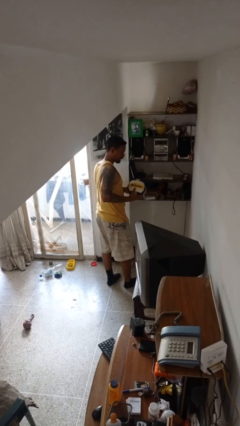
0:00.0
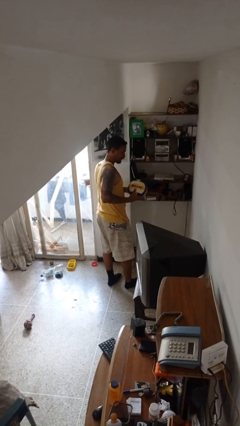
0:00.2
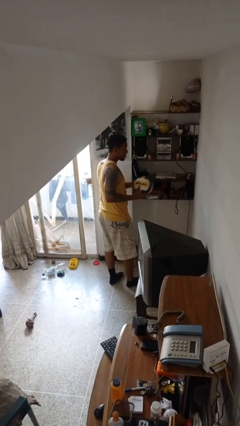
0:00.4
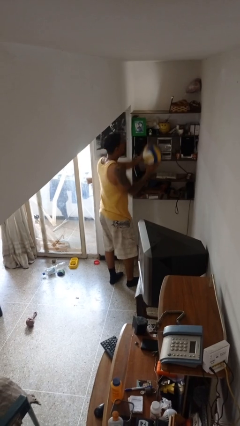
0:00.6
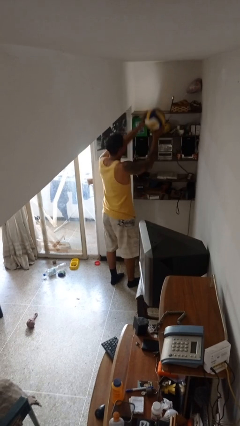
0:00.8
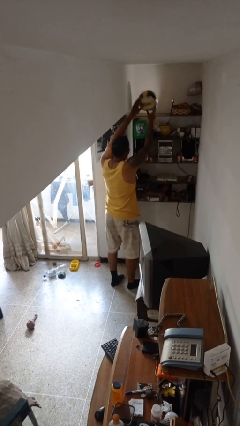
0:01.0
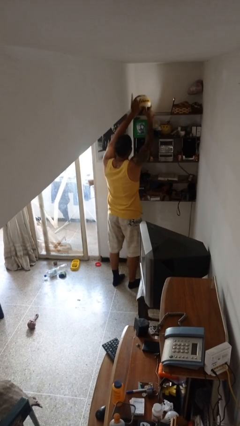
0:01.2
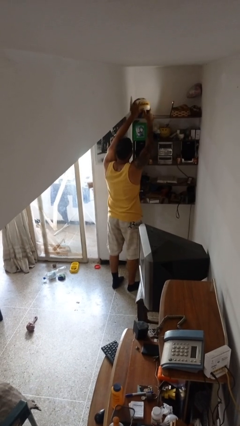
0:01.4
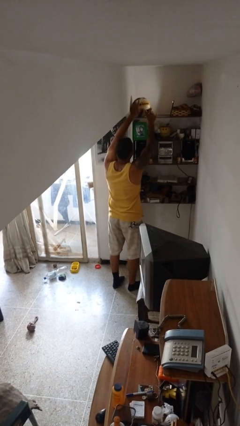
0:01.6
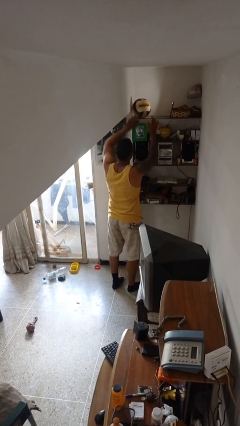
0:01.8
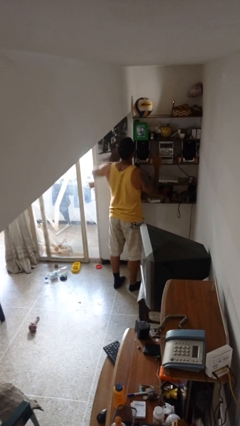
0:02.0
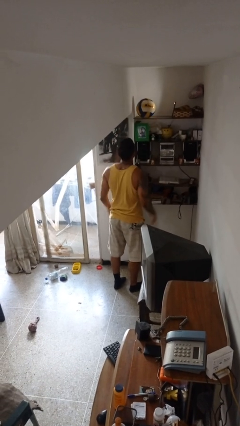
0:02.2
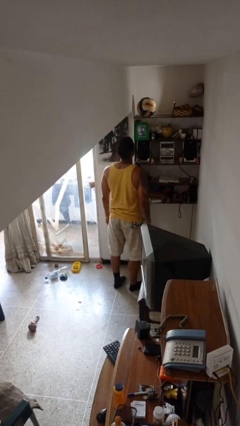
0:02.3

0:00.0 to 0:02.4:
person puts down object on shelf

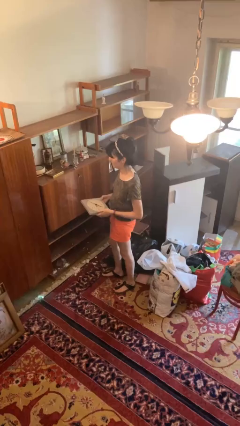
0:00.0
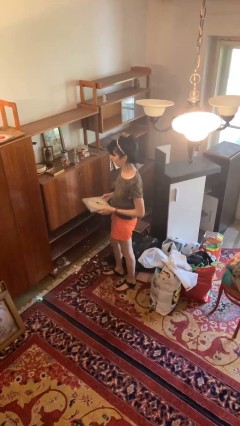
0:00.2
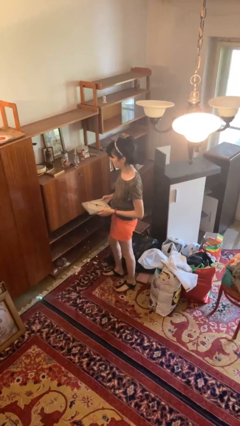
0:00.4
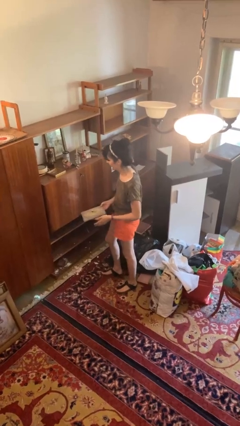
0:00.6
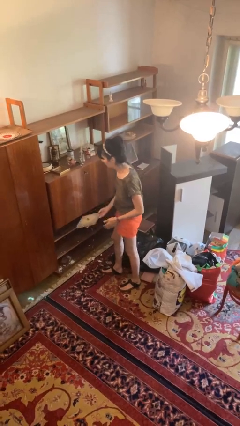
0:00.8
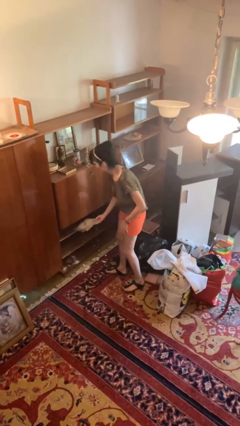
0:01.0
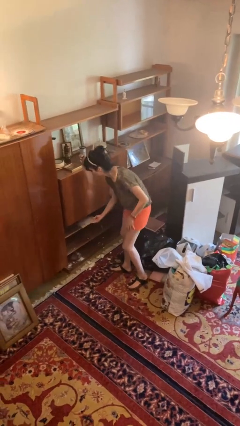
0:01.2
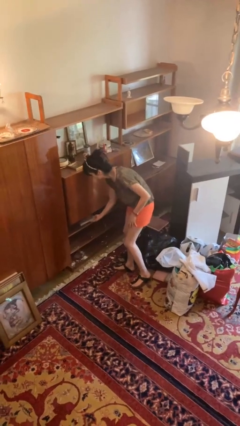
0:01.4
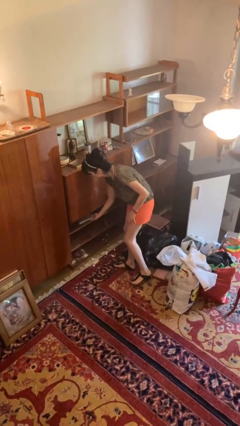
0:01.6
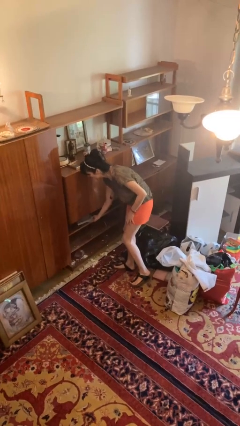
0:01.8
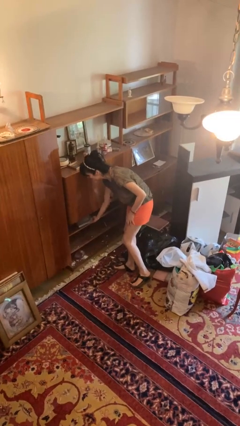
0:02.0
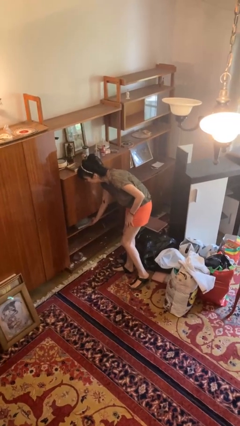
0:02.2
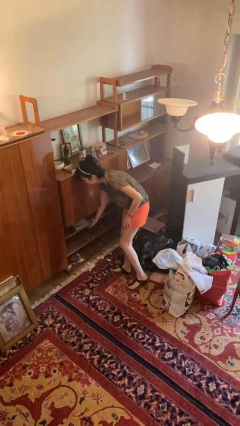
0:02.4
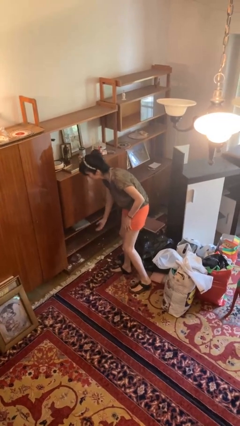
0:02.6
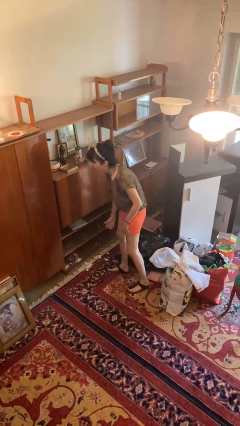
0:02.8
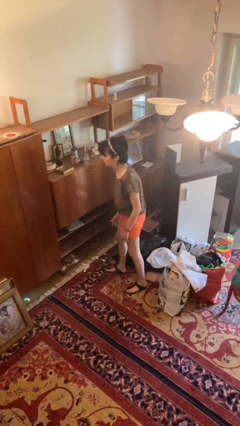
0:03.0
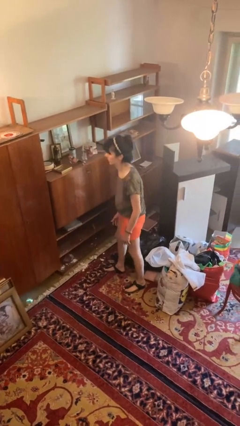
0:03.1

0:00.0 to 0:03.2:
person puts down object into cabinet

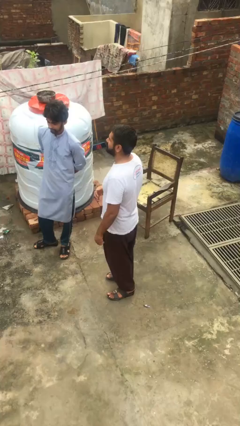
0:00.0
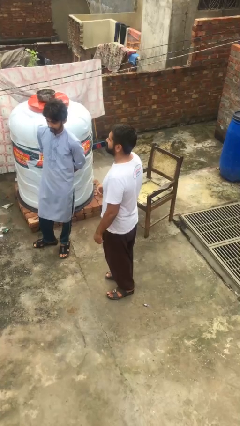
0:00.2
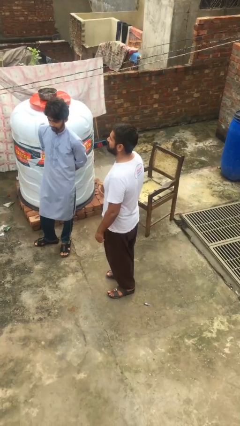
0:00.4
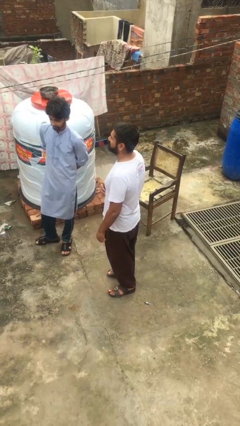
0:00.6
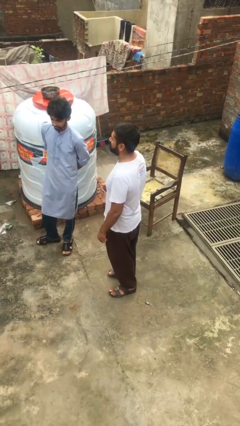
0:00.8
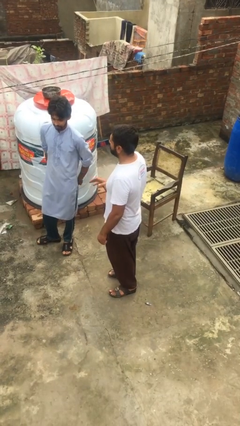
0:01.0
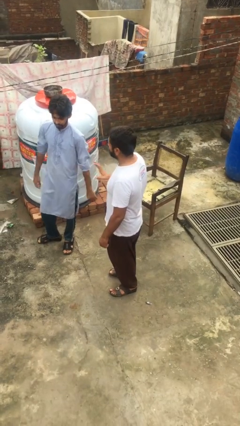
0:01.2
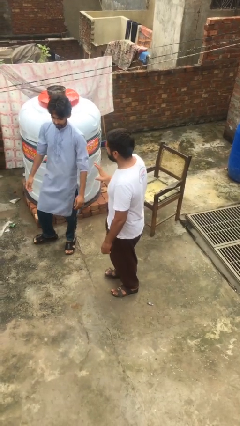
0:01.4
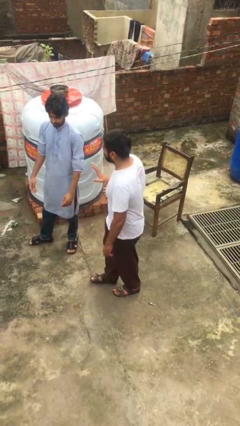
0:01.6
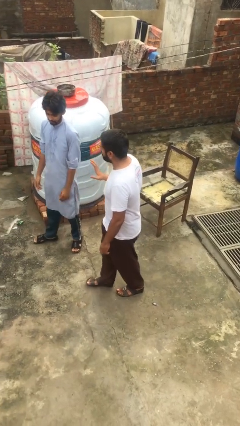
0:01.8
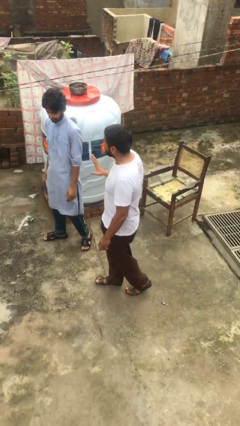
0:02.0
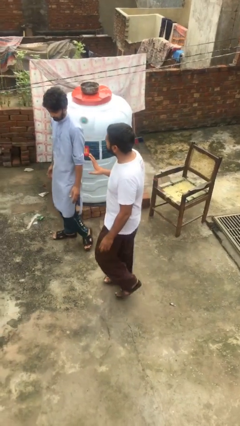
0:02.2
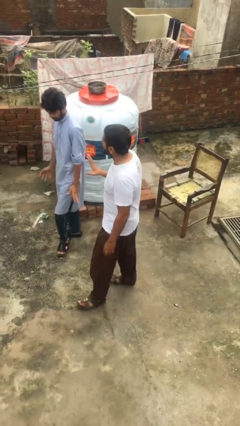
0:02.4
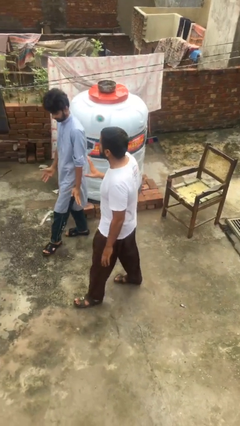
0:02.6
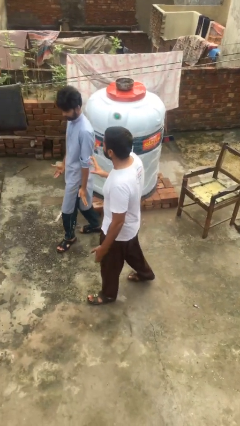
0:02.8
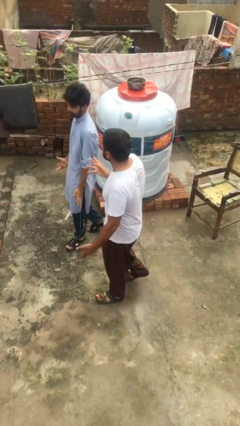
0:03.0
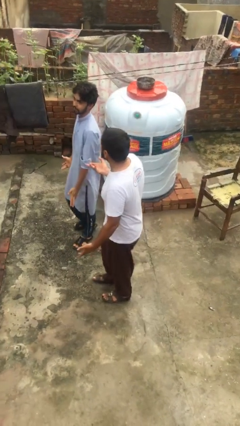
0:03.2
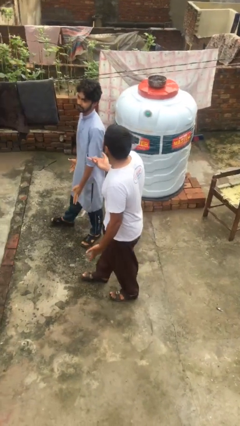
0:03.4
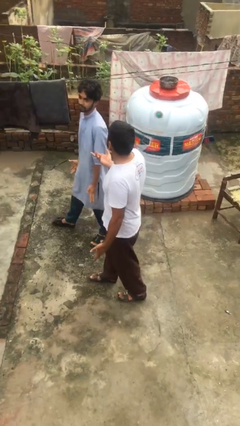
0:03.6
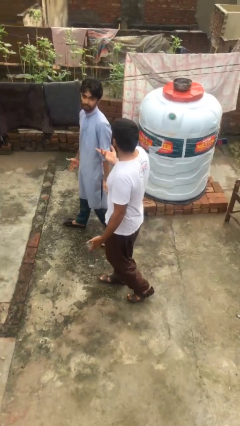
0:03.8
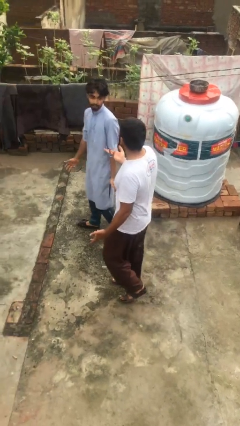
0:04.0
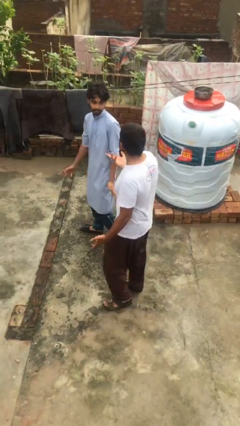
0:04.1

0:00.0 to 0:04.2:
person talks to person

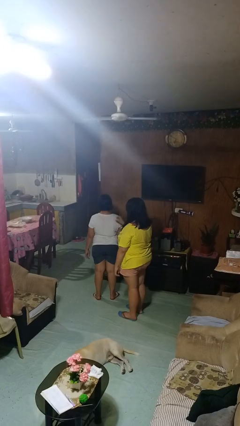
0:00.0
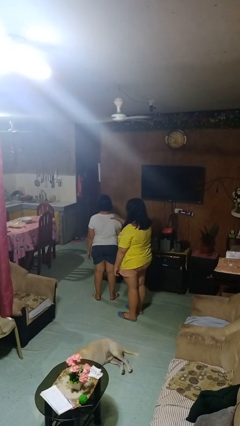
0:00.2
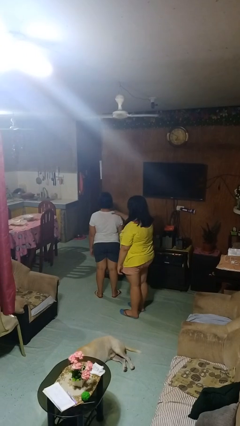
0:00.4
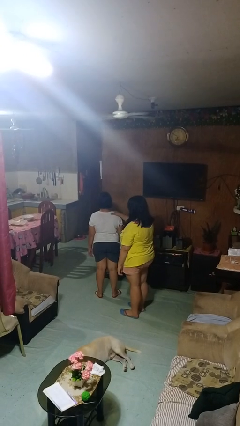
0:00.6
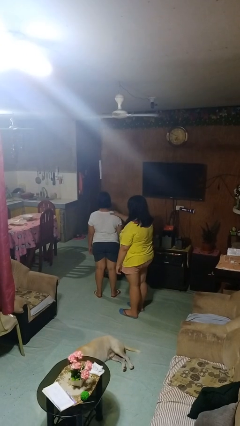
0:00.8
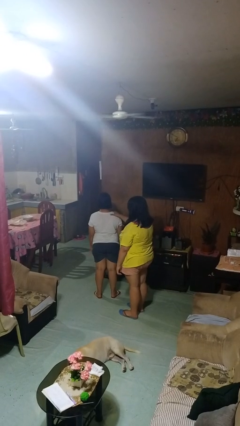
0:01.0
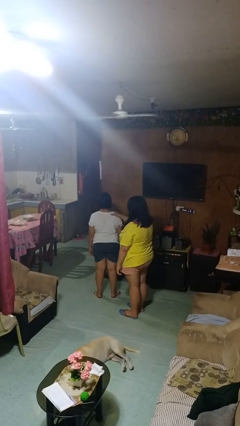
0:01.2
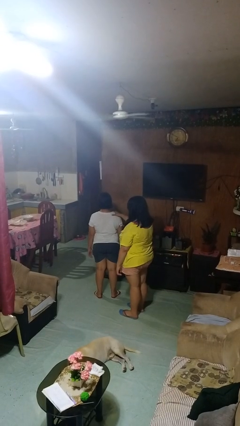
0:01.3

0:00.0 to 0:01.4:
person grabs person by shoulder

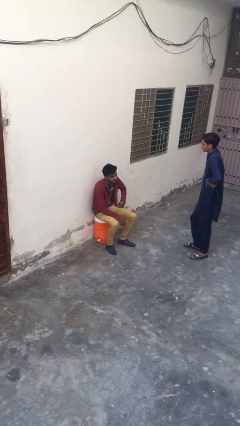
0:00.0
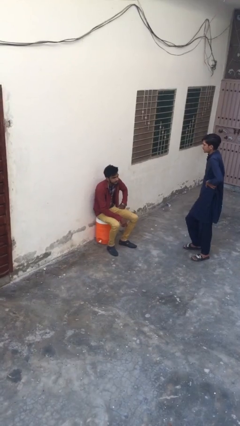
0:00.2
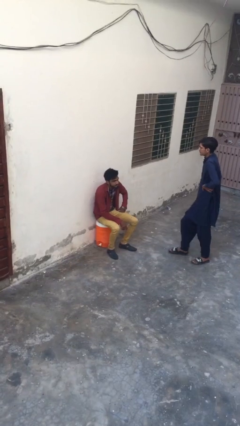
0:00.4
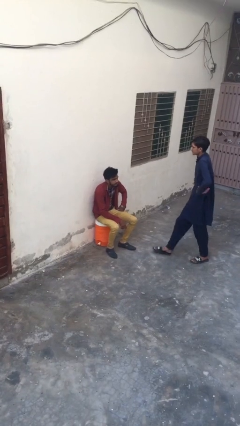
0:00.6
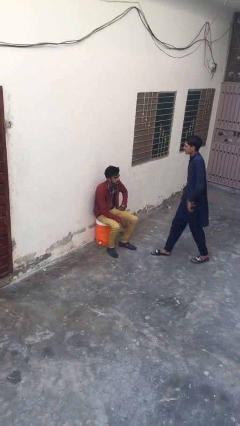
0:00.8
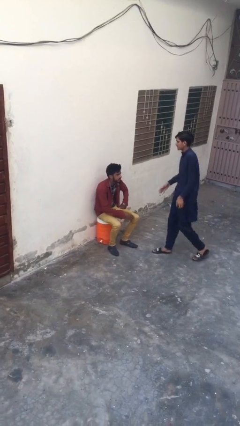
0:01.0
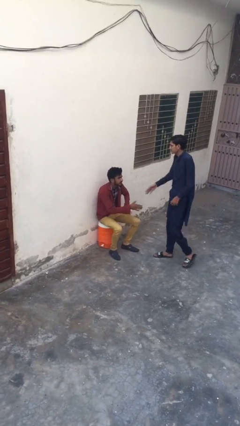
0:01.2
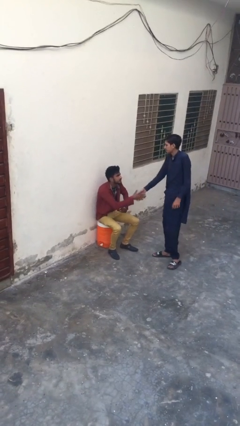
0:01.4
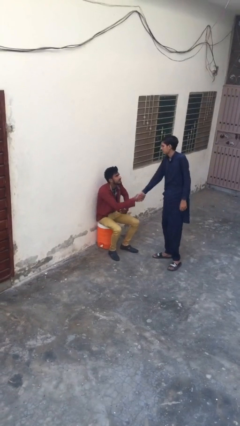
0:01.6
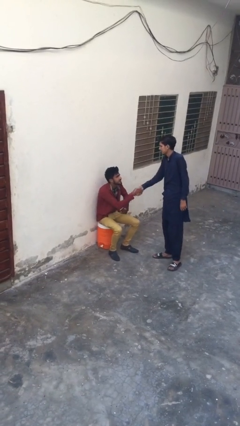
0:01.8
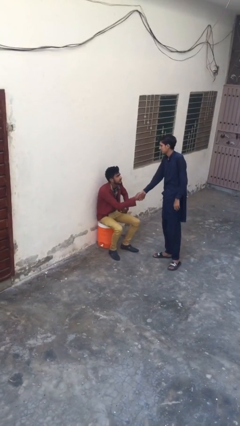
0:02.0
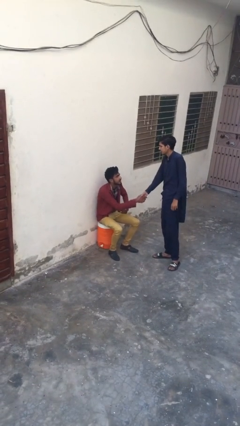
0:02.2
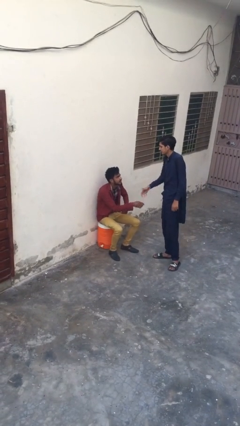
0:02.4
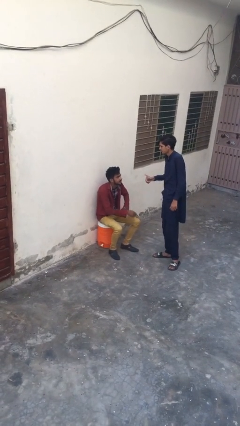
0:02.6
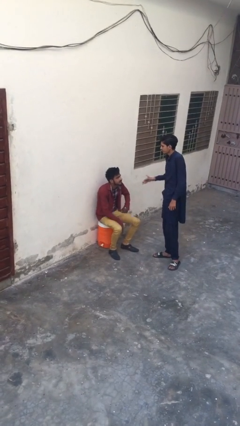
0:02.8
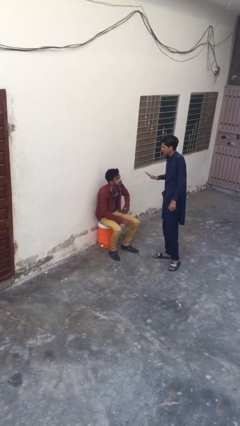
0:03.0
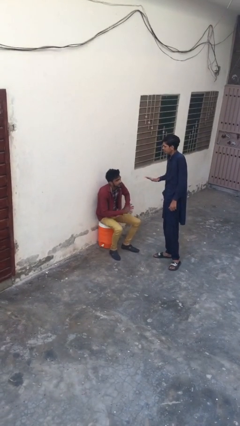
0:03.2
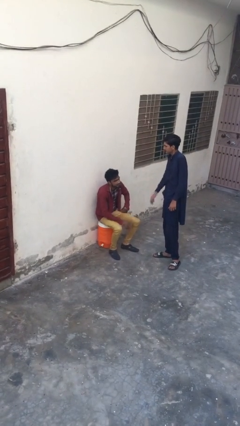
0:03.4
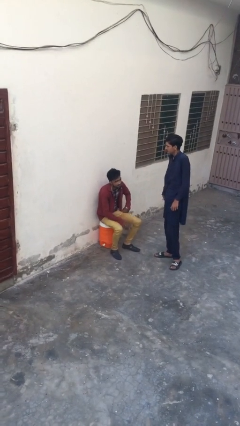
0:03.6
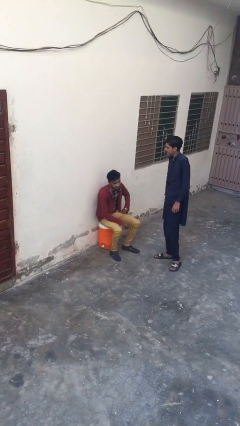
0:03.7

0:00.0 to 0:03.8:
person shakes hand

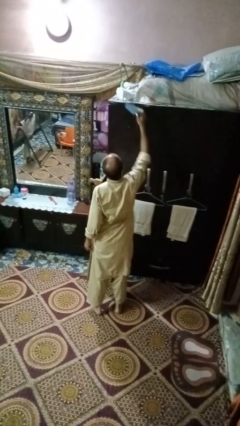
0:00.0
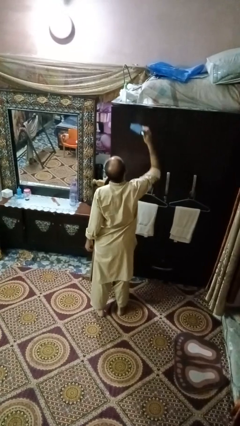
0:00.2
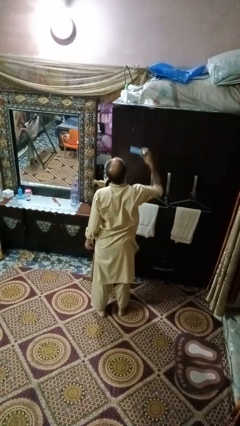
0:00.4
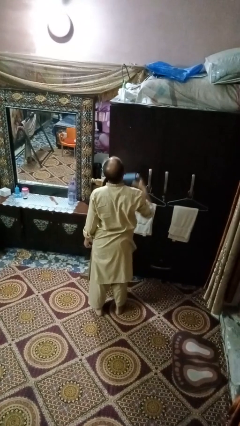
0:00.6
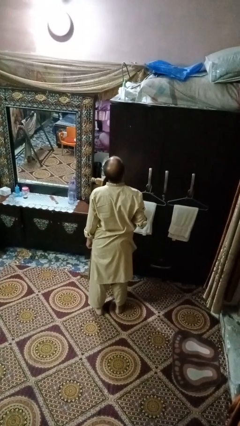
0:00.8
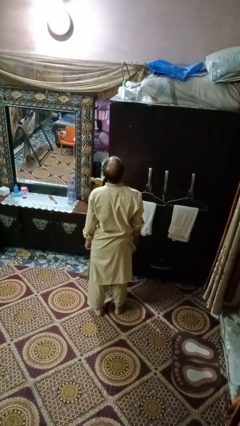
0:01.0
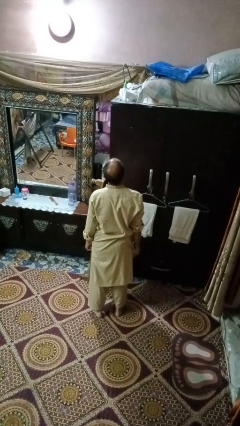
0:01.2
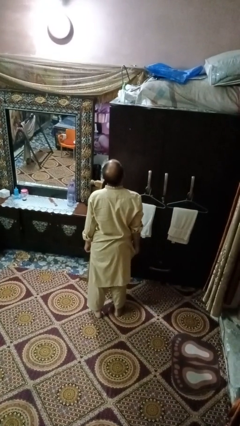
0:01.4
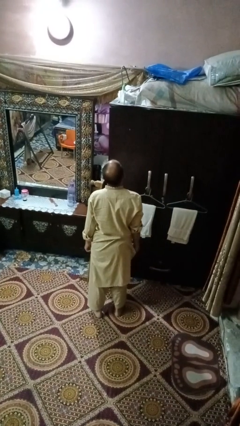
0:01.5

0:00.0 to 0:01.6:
person puts down object on countertop

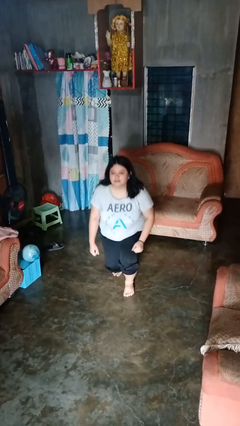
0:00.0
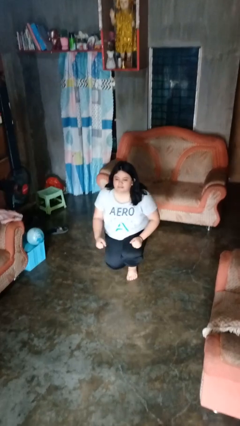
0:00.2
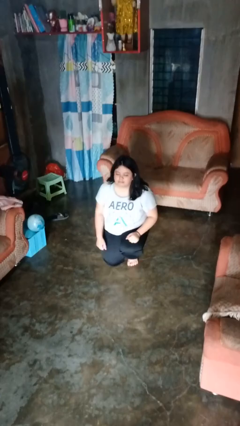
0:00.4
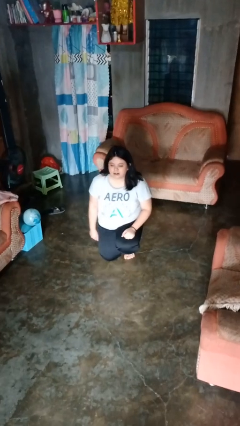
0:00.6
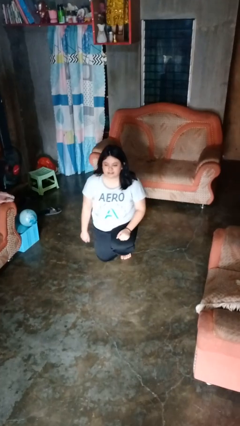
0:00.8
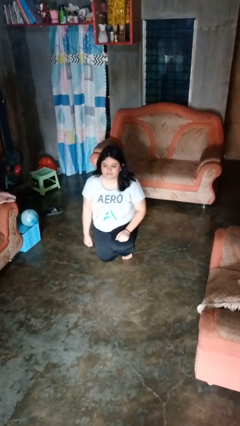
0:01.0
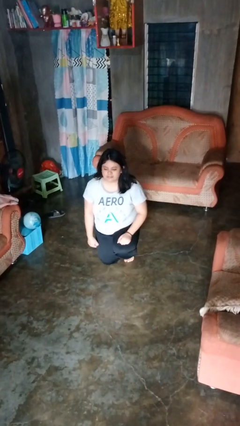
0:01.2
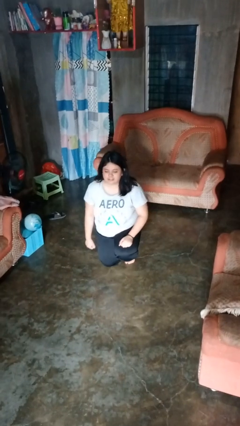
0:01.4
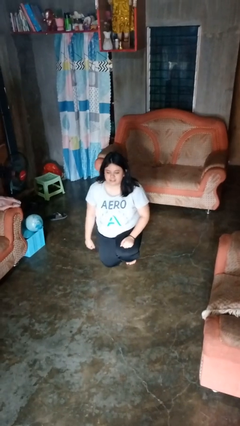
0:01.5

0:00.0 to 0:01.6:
person kneels
